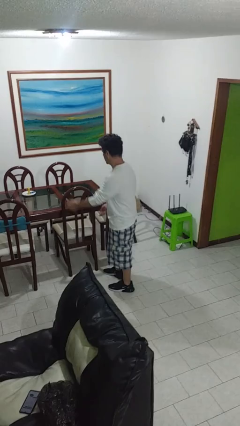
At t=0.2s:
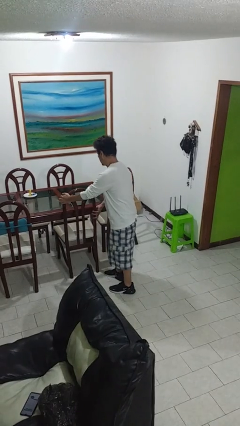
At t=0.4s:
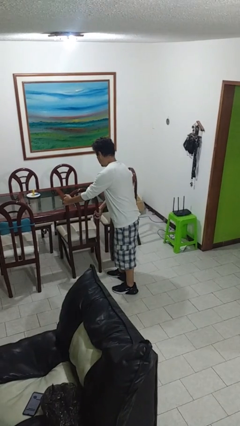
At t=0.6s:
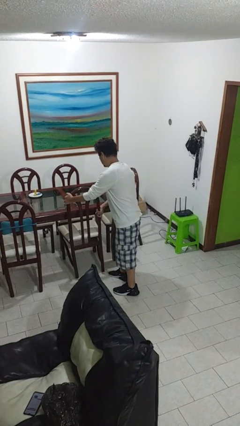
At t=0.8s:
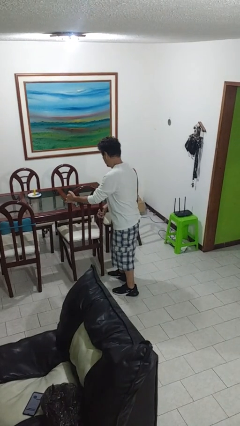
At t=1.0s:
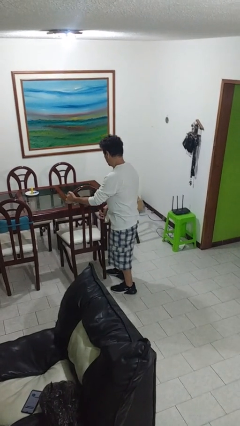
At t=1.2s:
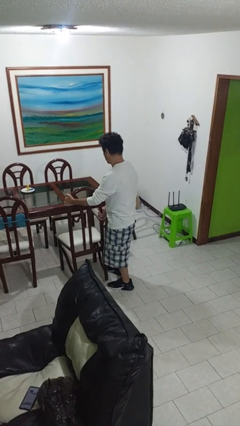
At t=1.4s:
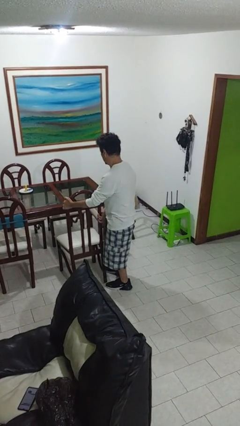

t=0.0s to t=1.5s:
person pulls out chair

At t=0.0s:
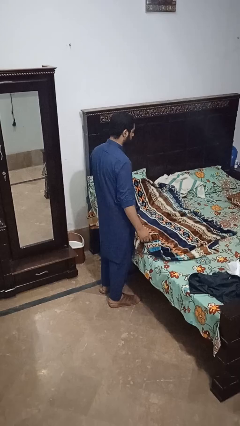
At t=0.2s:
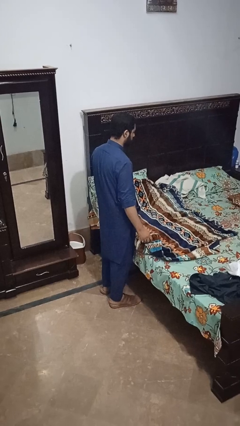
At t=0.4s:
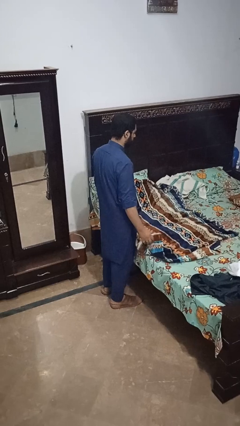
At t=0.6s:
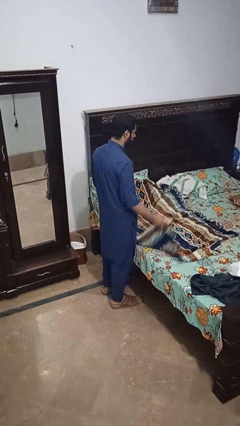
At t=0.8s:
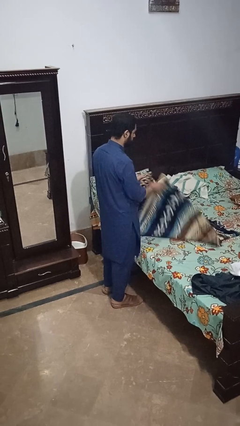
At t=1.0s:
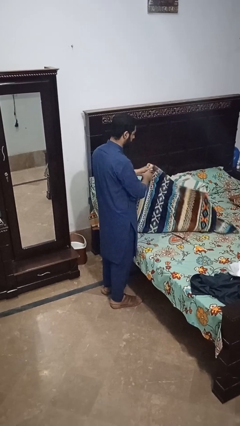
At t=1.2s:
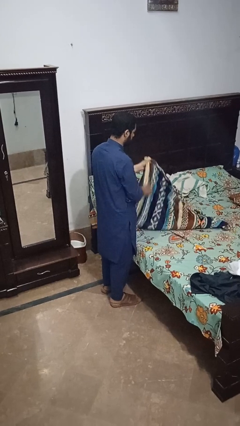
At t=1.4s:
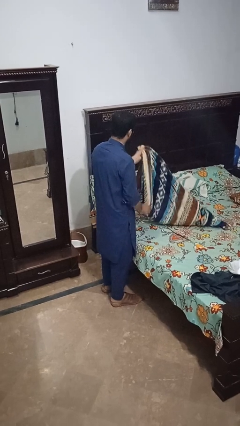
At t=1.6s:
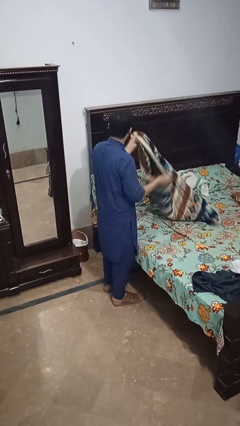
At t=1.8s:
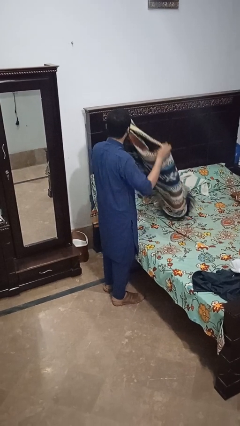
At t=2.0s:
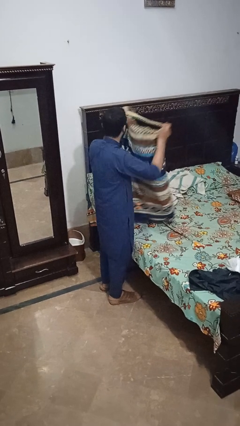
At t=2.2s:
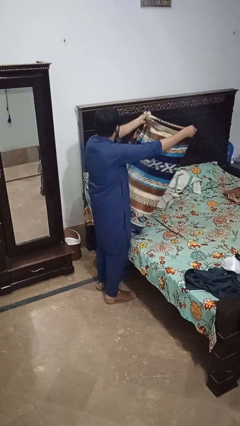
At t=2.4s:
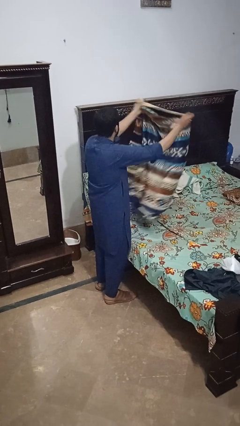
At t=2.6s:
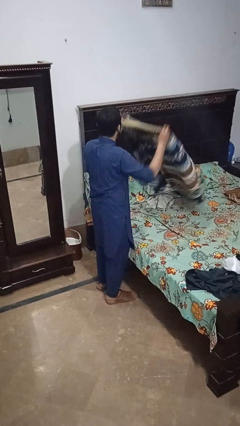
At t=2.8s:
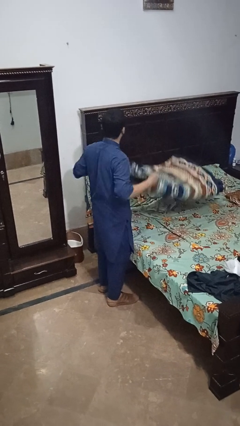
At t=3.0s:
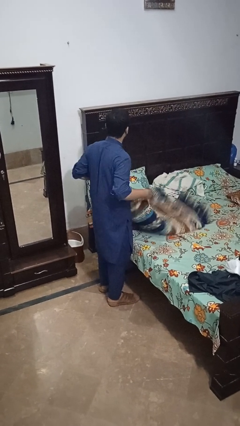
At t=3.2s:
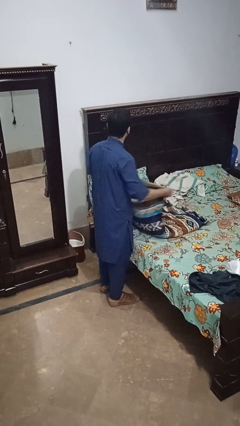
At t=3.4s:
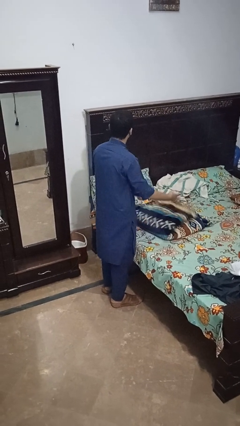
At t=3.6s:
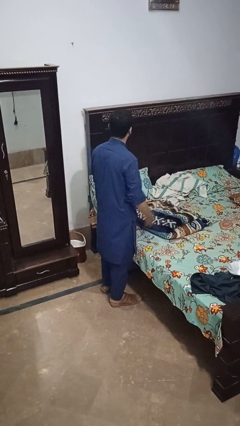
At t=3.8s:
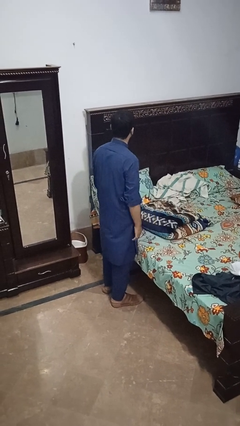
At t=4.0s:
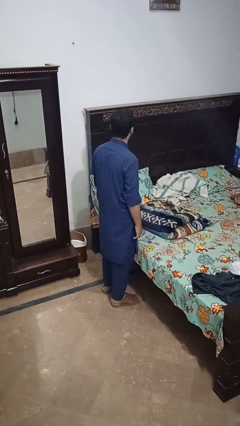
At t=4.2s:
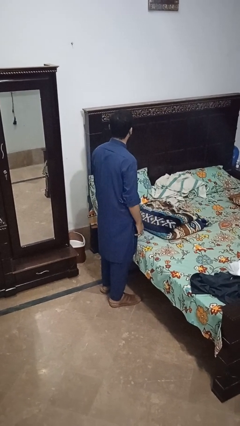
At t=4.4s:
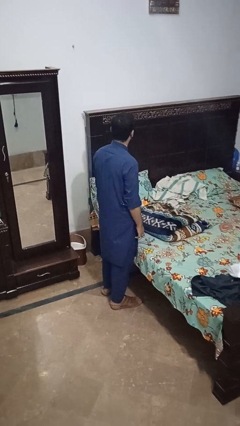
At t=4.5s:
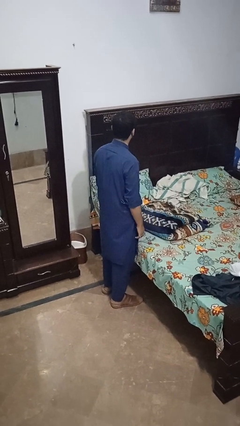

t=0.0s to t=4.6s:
person folds blanket

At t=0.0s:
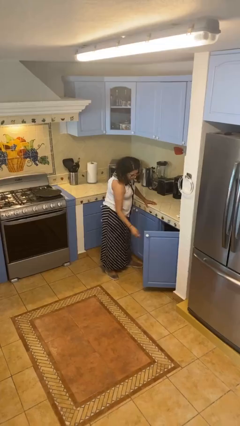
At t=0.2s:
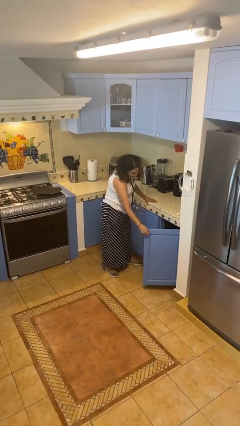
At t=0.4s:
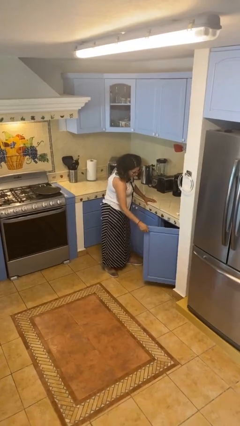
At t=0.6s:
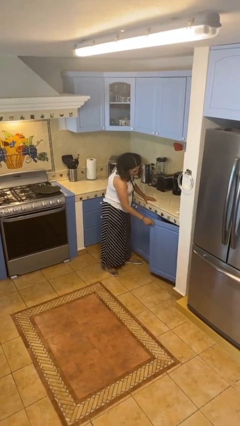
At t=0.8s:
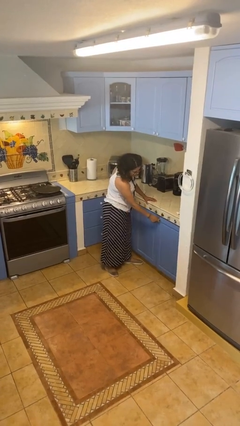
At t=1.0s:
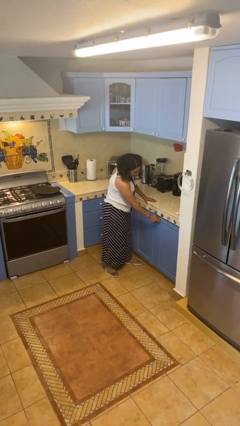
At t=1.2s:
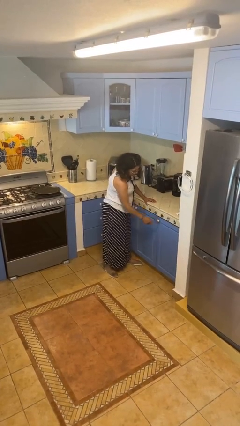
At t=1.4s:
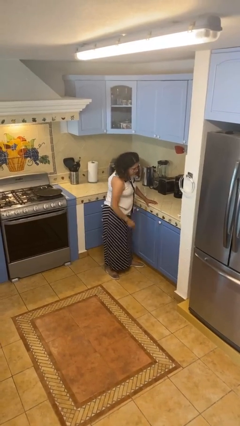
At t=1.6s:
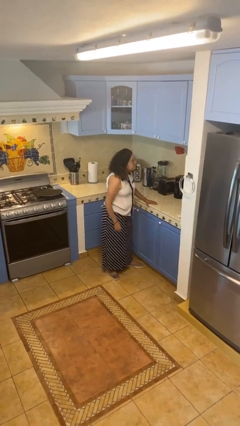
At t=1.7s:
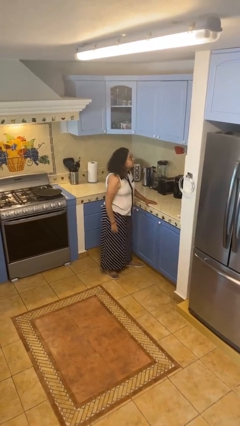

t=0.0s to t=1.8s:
person closes cabinet

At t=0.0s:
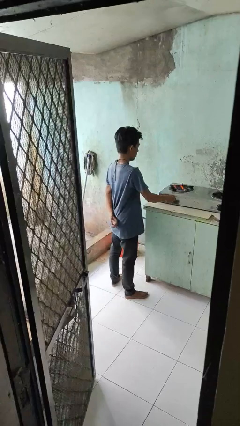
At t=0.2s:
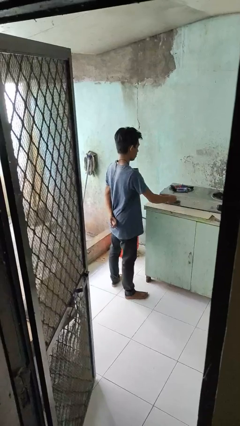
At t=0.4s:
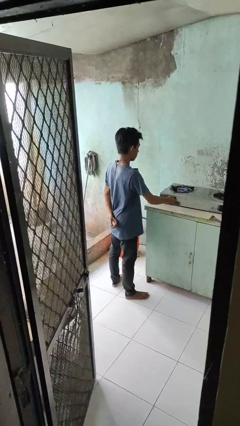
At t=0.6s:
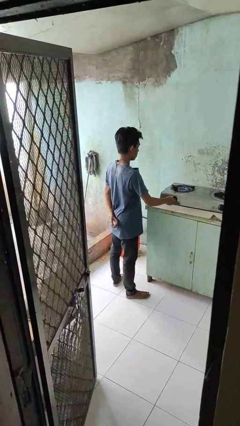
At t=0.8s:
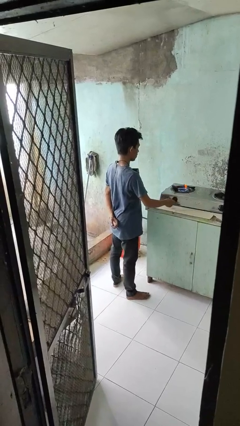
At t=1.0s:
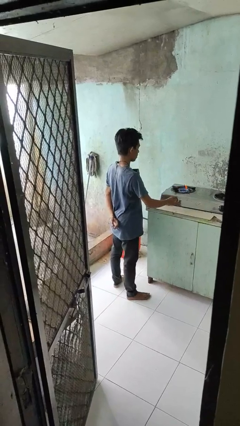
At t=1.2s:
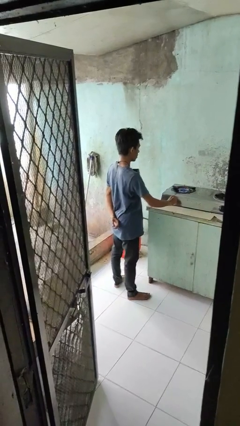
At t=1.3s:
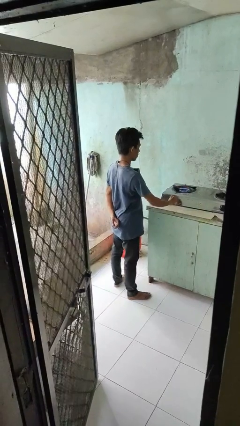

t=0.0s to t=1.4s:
person turns on stovetop

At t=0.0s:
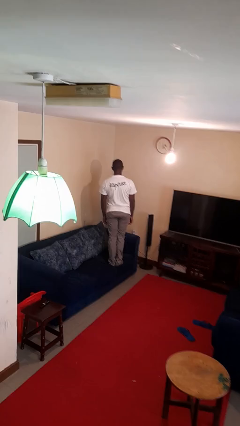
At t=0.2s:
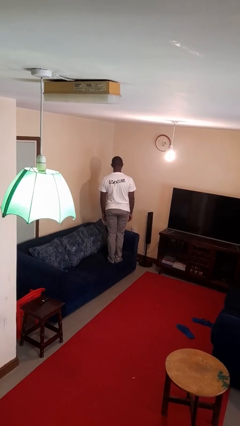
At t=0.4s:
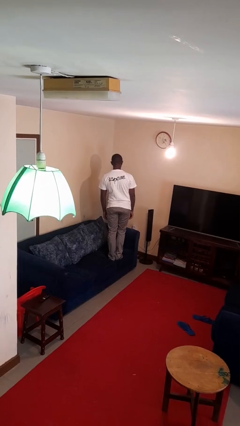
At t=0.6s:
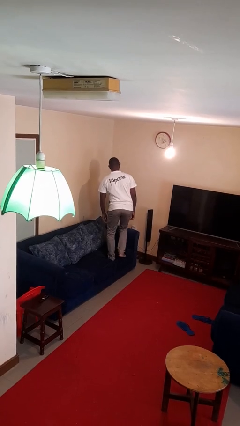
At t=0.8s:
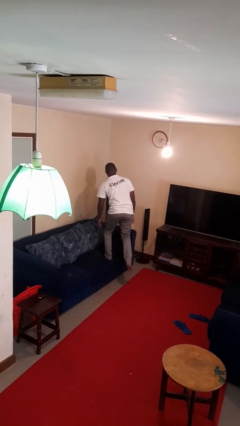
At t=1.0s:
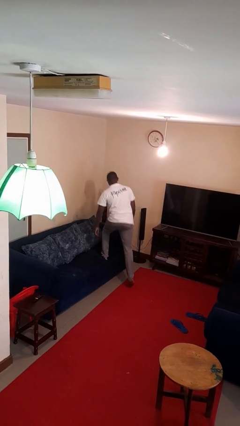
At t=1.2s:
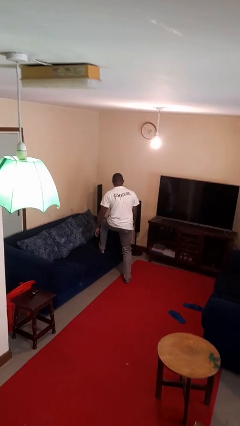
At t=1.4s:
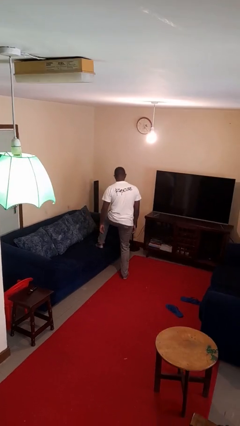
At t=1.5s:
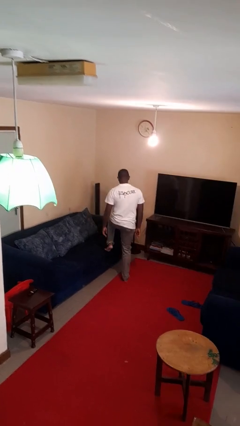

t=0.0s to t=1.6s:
person climbs off couch

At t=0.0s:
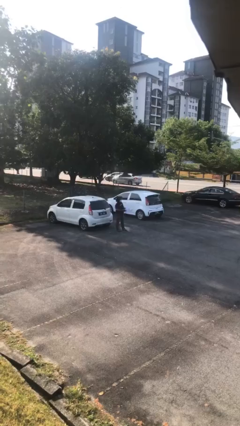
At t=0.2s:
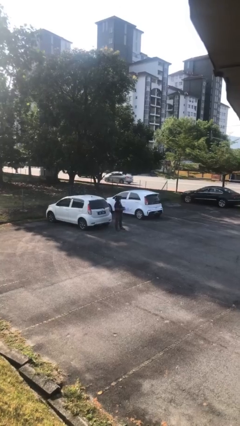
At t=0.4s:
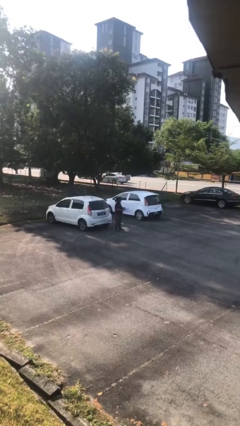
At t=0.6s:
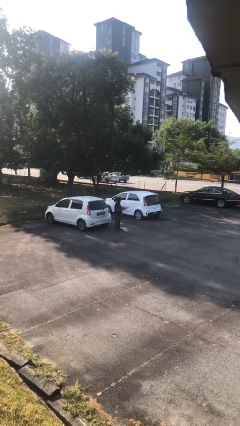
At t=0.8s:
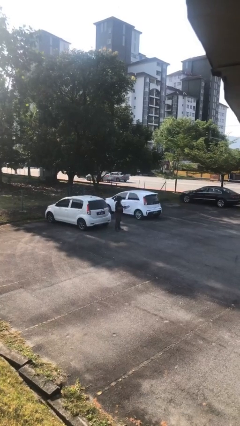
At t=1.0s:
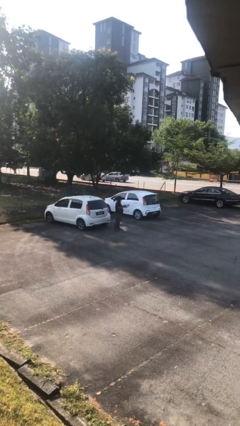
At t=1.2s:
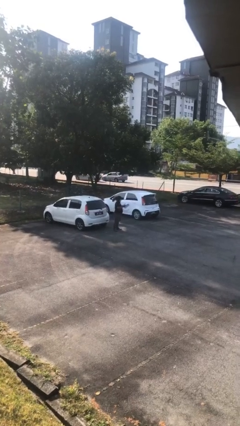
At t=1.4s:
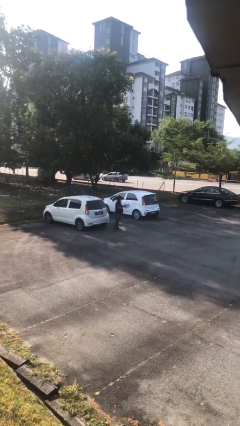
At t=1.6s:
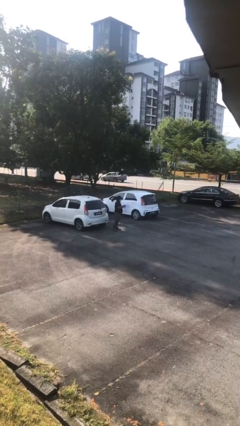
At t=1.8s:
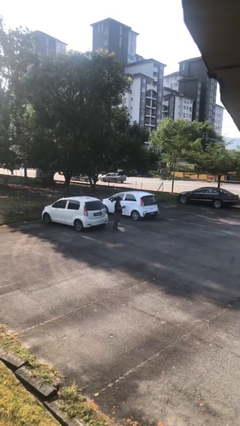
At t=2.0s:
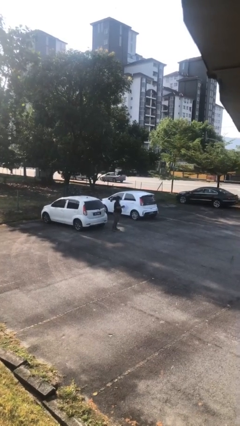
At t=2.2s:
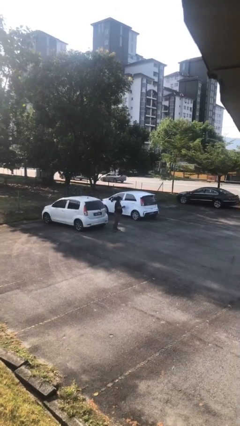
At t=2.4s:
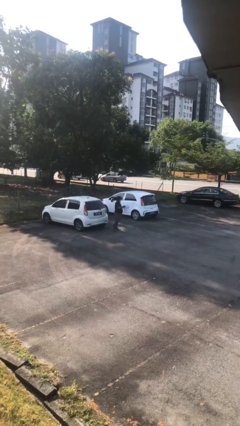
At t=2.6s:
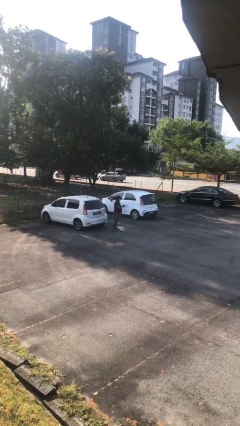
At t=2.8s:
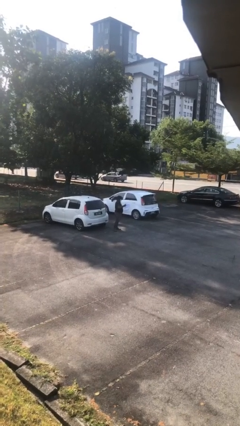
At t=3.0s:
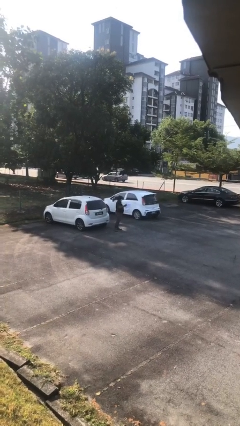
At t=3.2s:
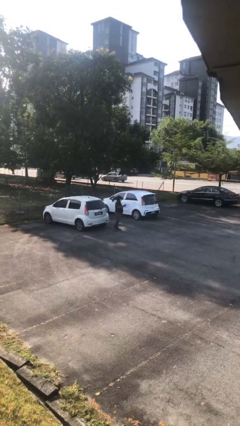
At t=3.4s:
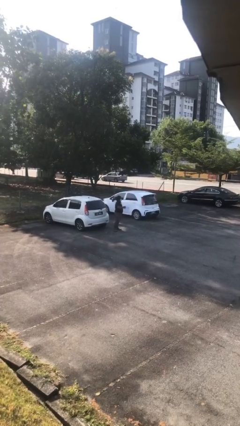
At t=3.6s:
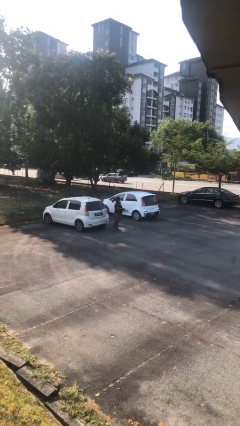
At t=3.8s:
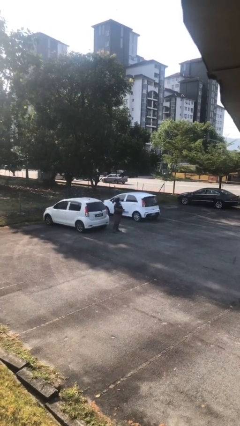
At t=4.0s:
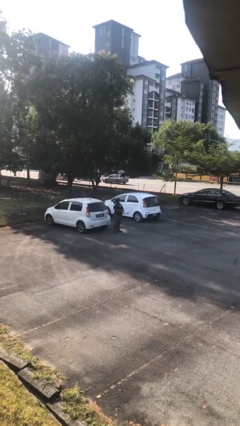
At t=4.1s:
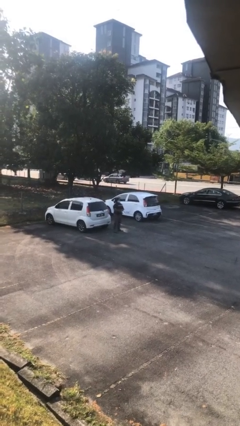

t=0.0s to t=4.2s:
person reads document

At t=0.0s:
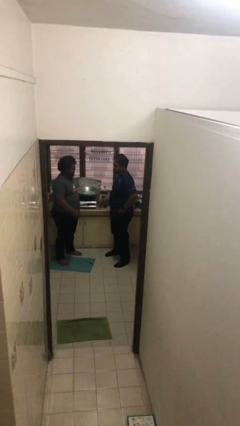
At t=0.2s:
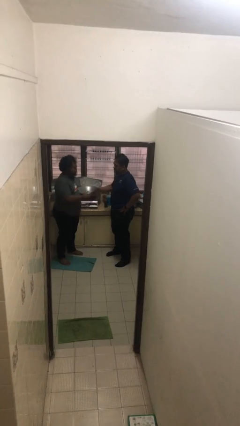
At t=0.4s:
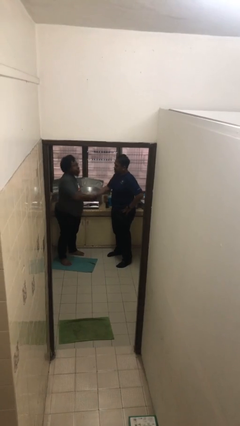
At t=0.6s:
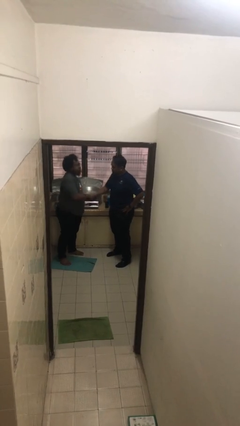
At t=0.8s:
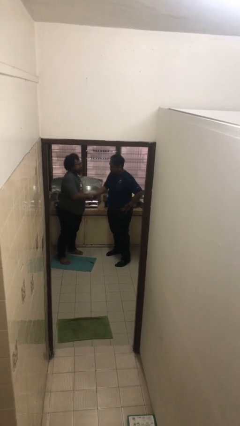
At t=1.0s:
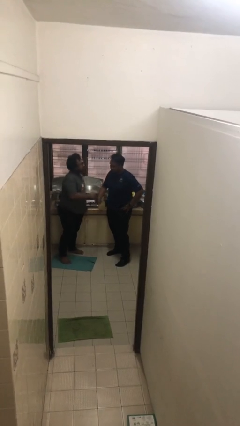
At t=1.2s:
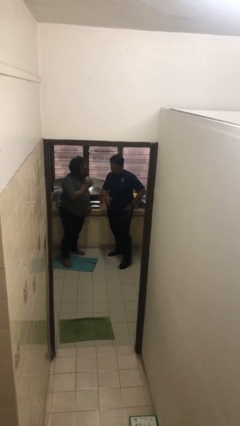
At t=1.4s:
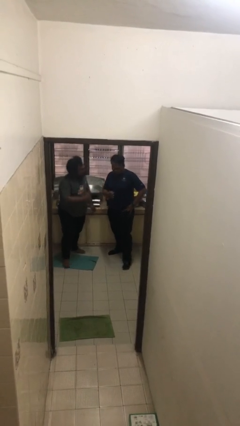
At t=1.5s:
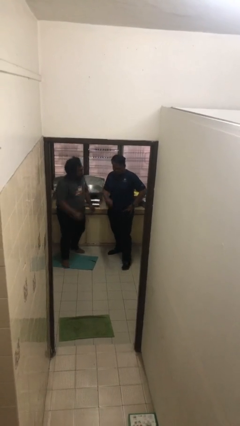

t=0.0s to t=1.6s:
person shakes hand

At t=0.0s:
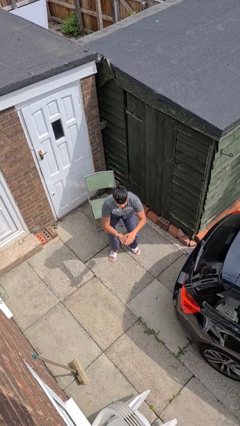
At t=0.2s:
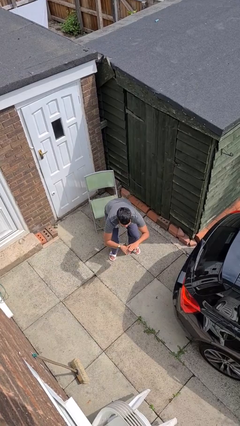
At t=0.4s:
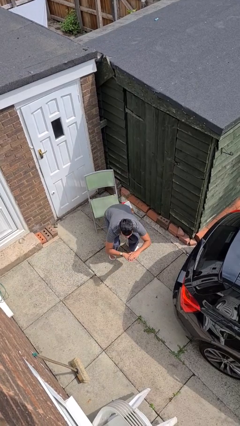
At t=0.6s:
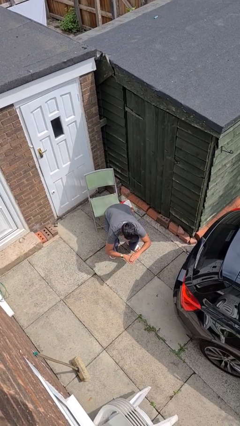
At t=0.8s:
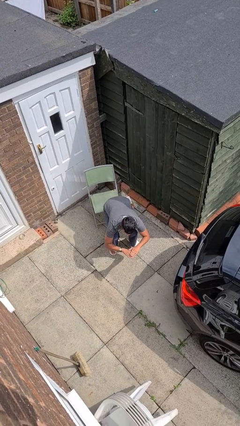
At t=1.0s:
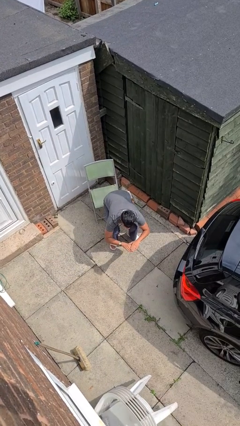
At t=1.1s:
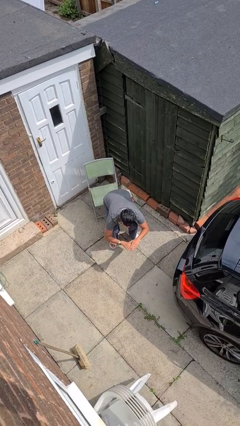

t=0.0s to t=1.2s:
person squats
